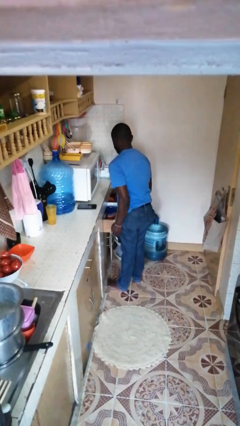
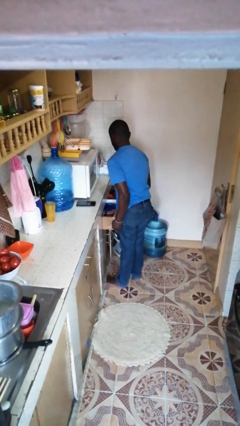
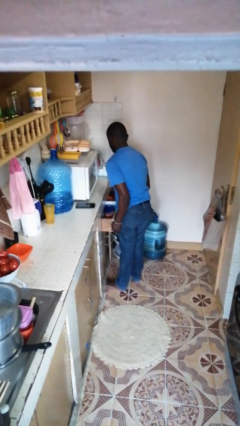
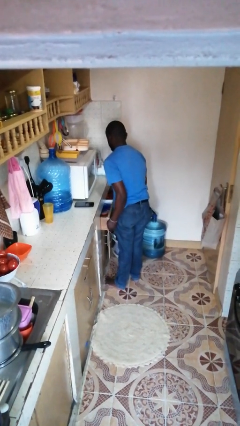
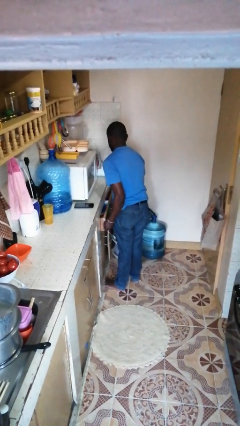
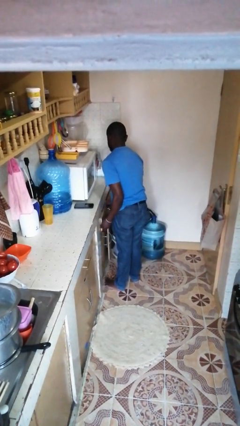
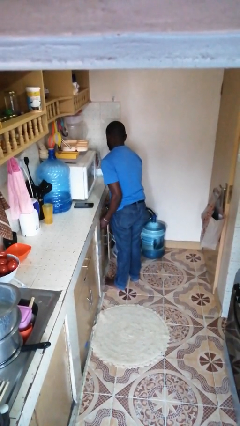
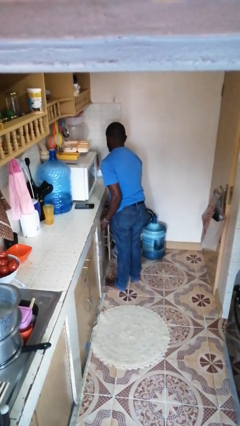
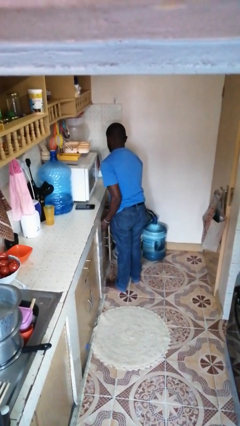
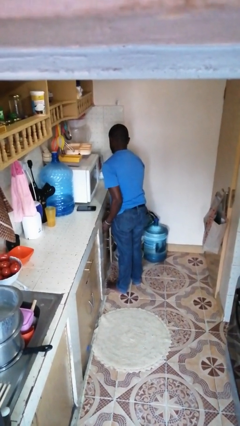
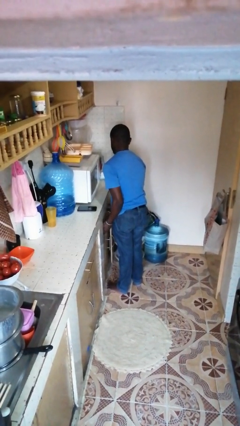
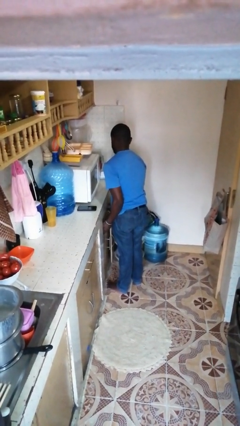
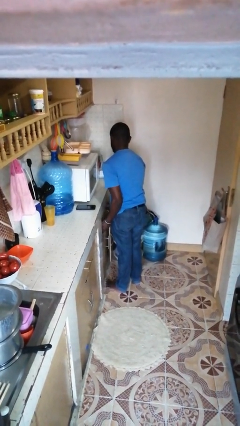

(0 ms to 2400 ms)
person closes kitchen drawer

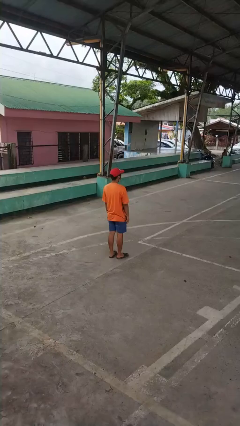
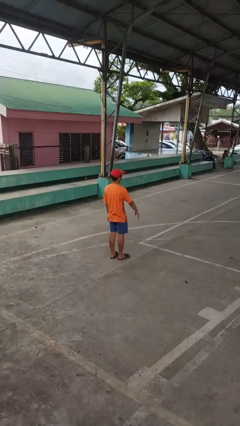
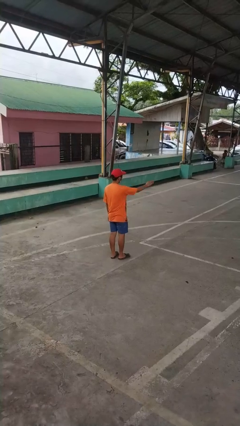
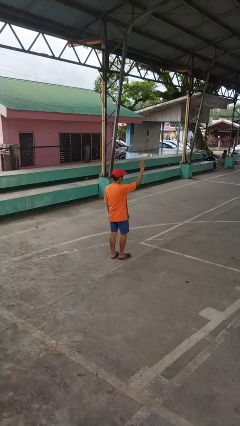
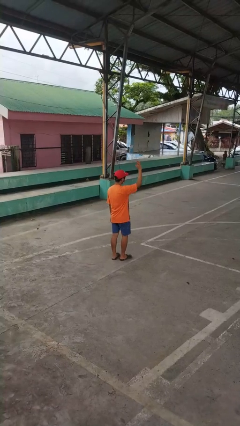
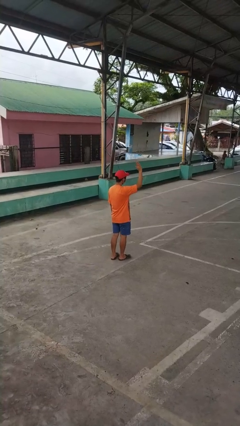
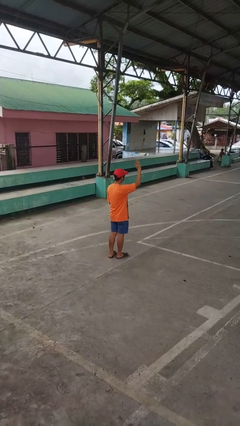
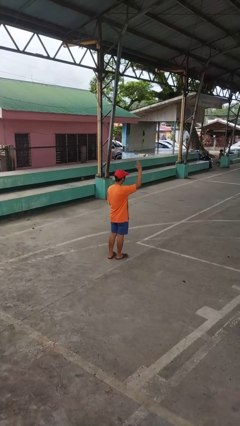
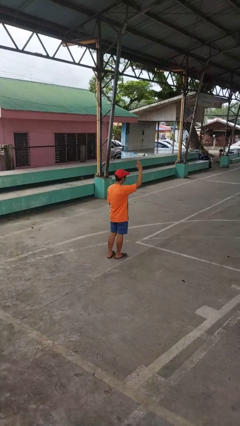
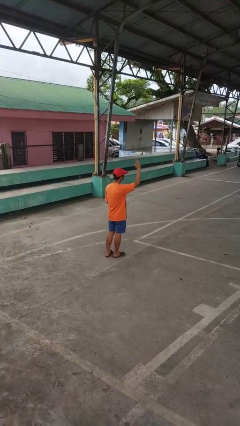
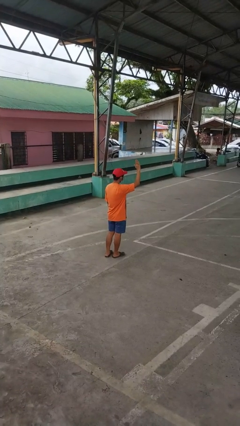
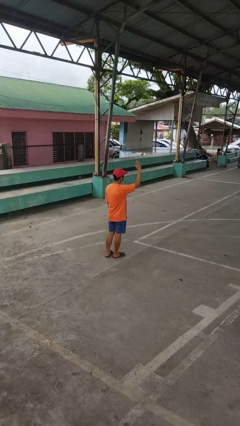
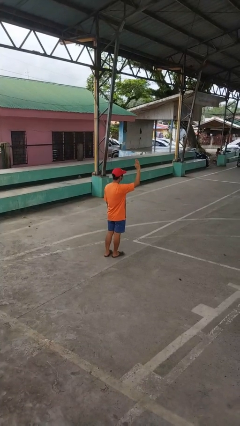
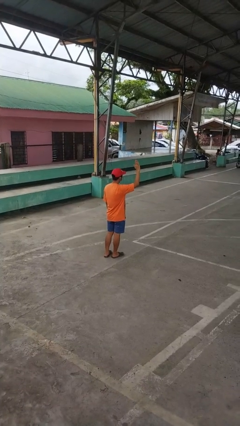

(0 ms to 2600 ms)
person gestures raise hand

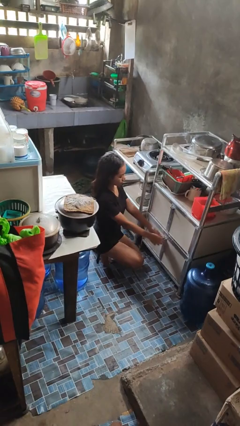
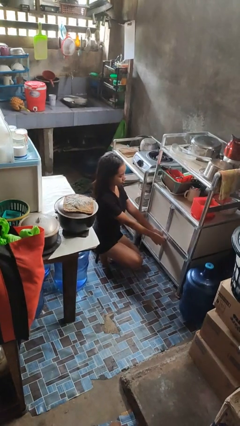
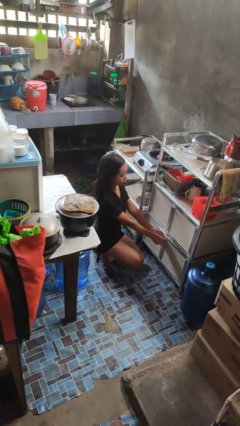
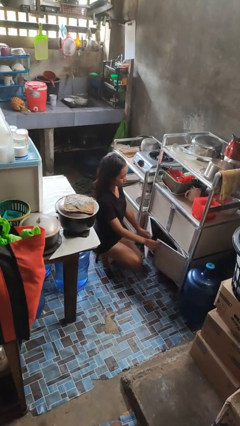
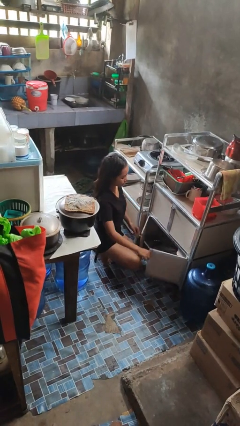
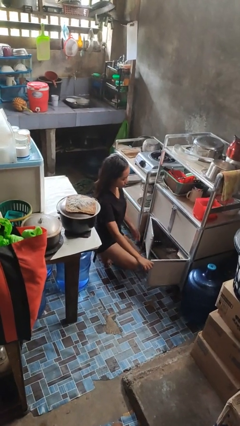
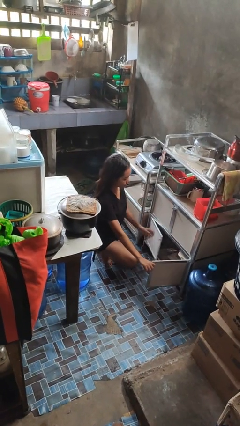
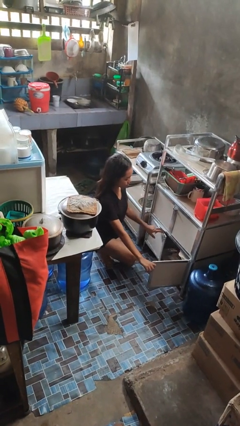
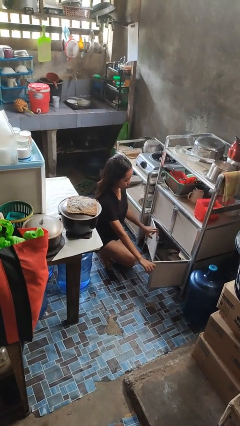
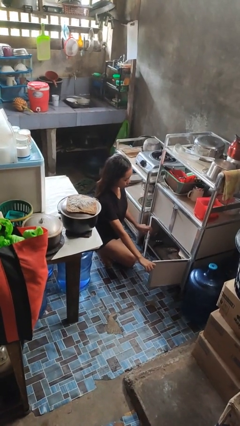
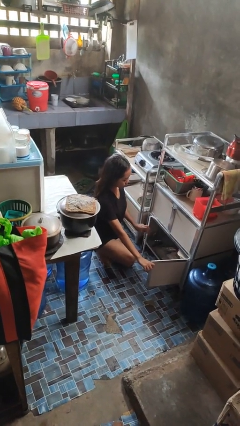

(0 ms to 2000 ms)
person opens cabinet

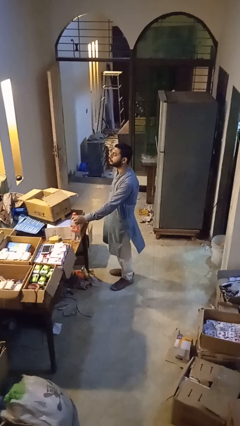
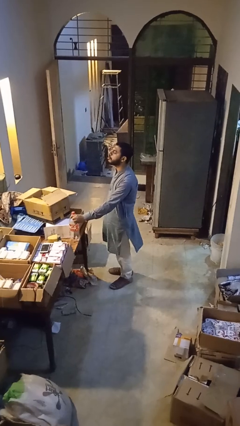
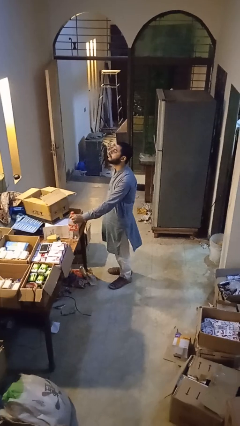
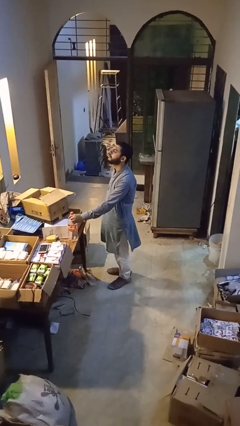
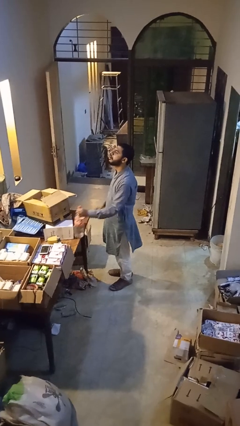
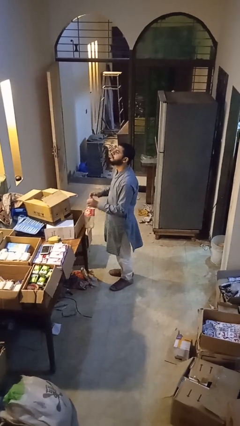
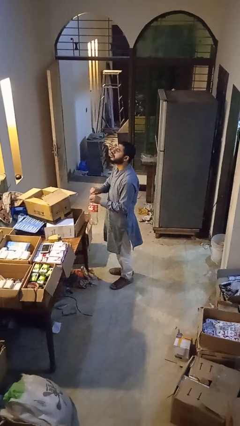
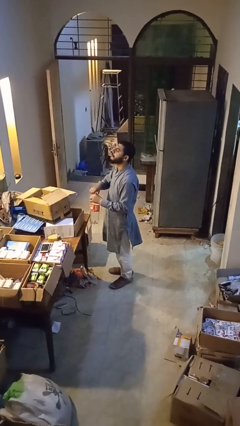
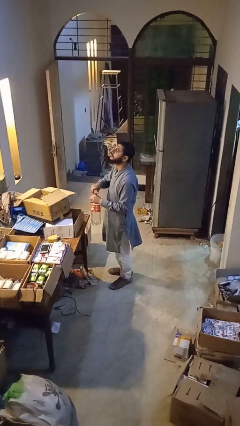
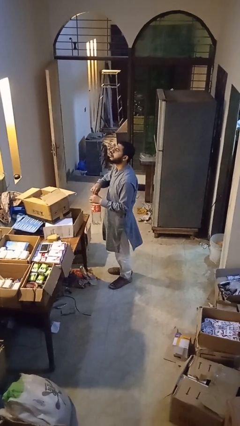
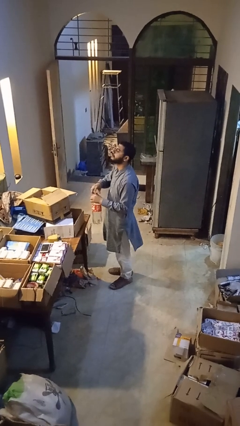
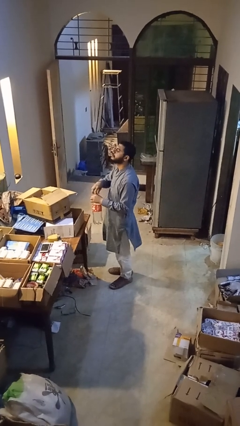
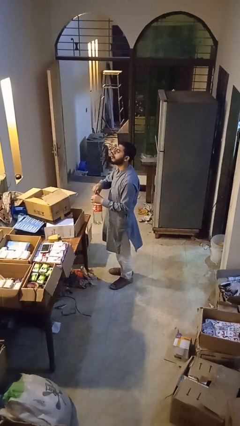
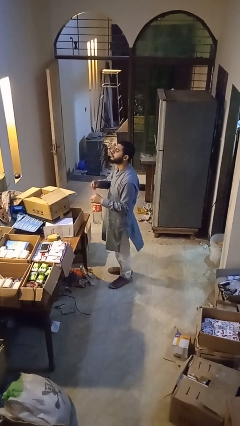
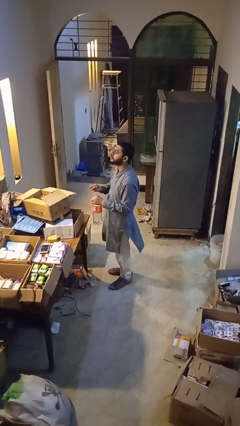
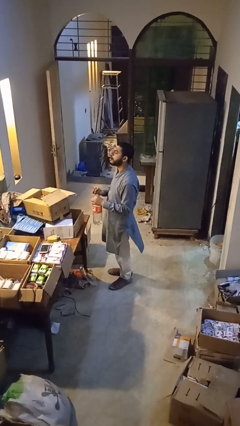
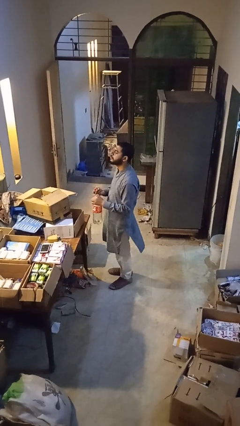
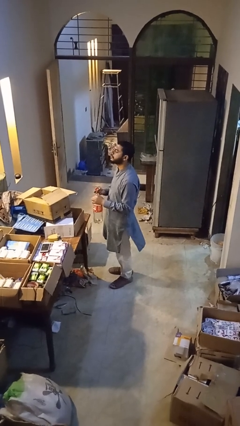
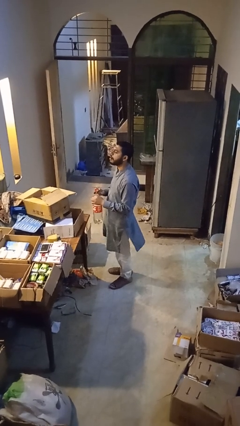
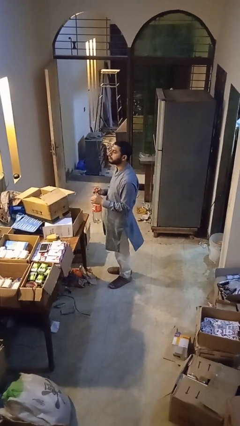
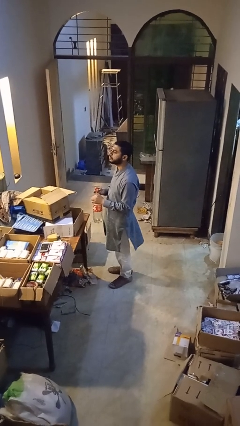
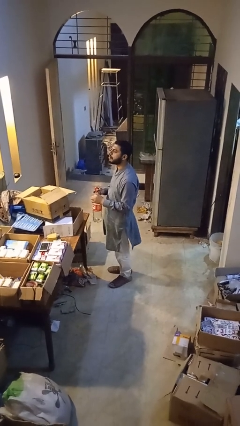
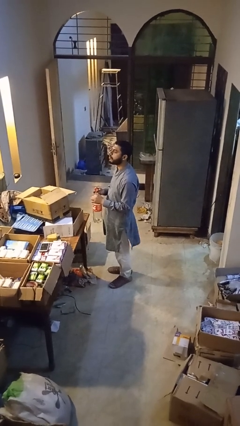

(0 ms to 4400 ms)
person unscrews lid from bottle

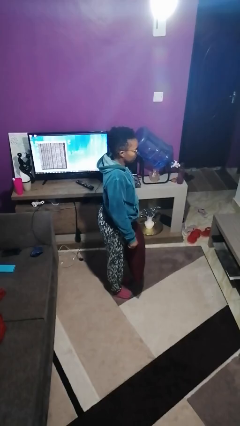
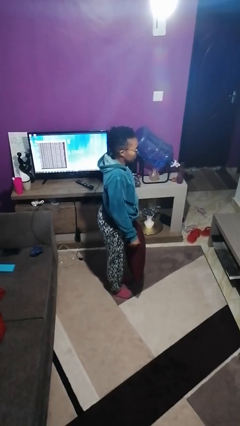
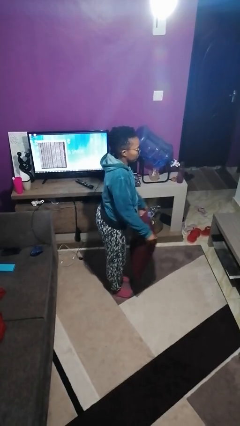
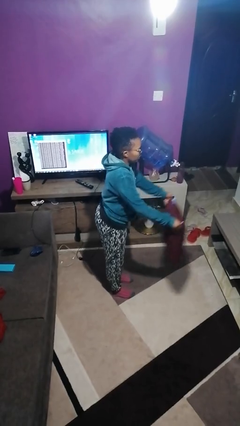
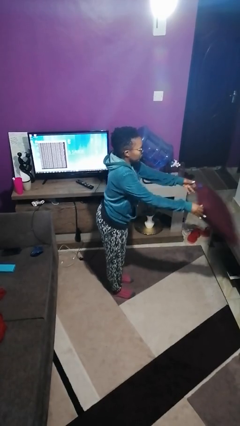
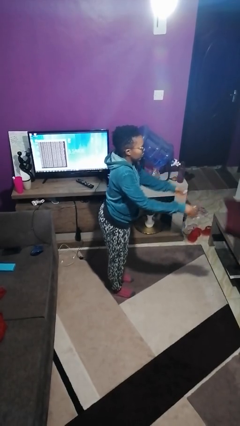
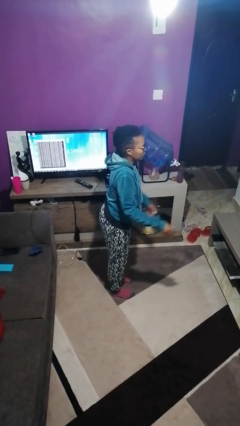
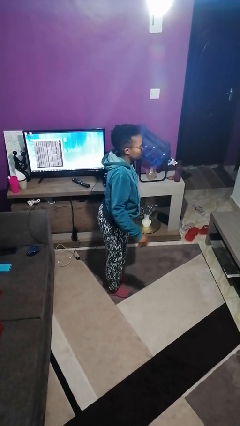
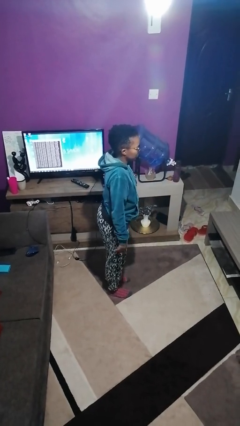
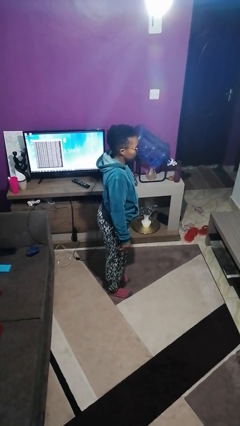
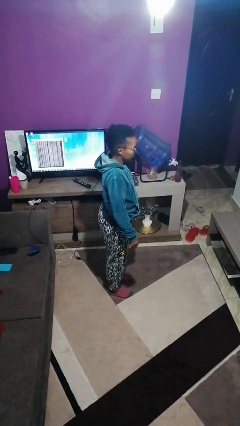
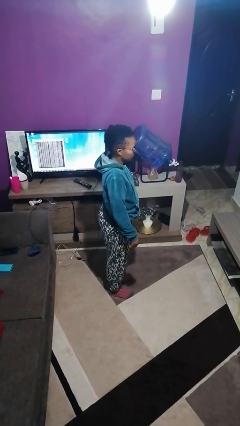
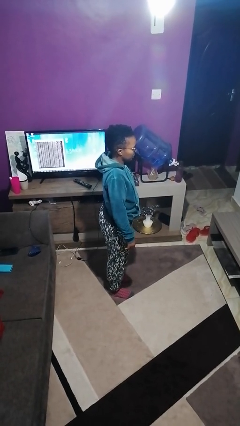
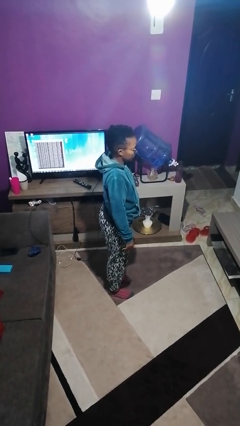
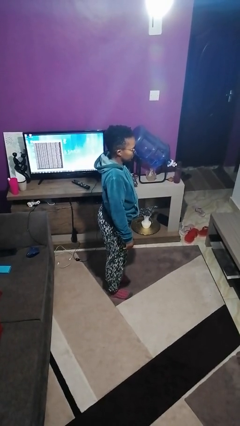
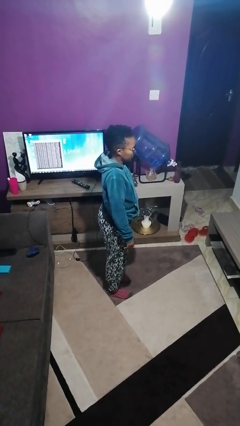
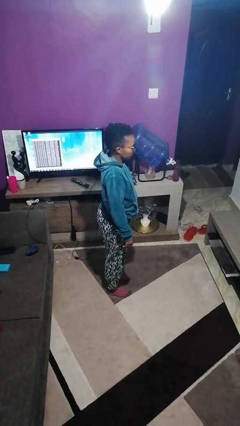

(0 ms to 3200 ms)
person throws object on table

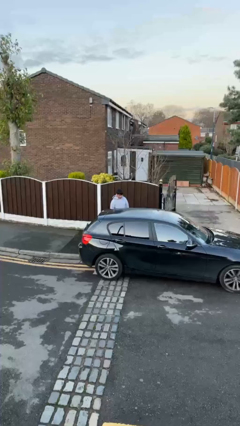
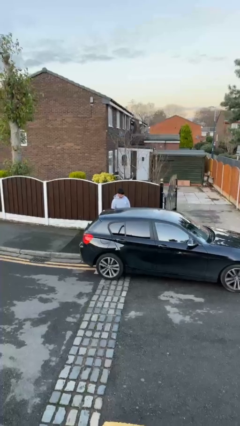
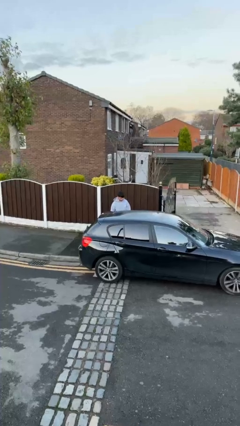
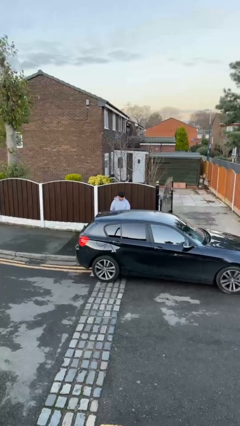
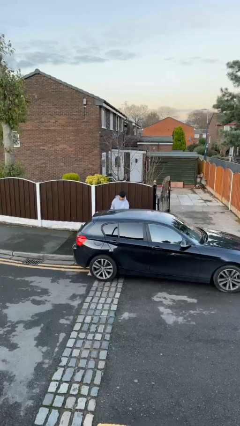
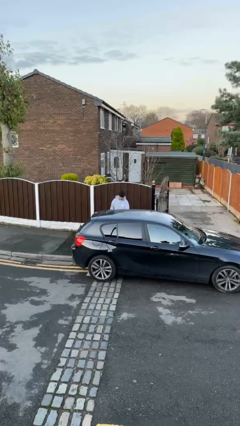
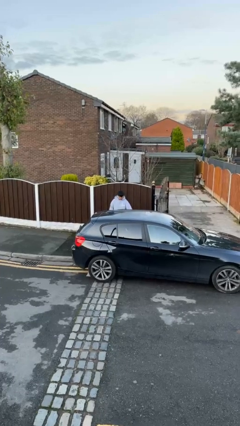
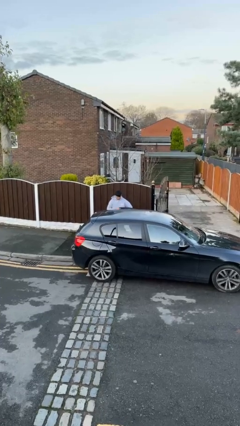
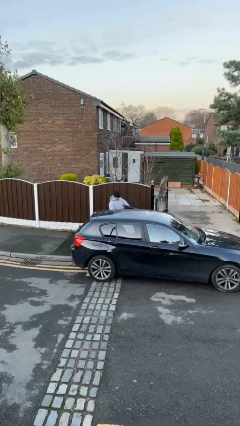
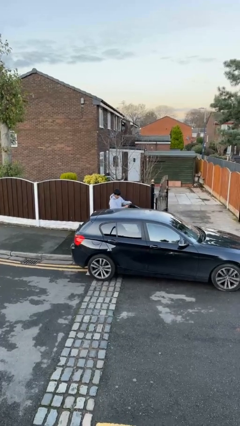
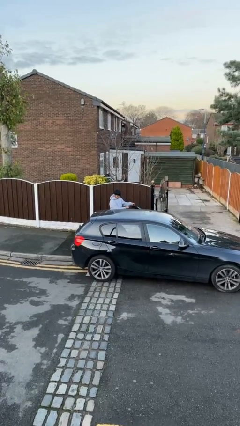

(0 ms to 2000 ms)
person opens car door

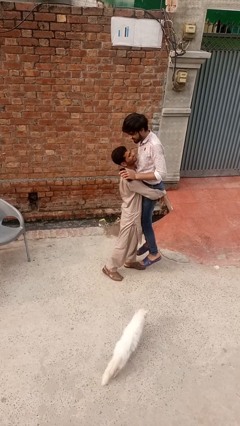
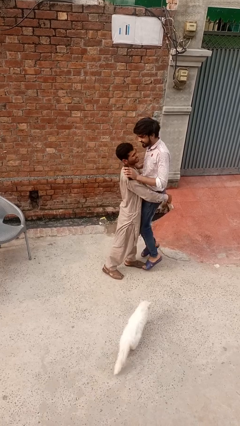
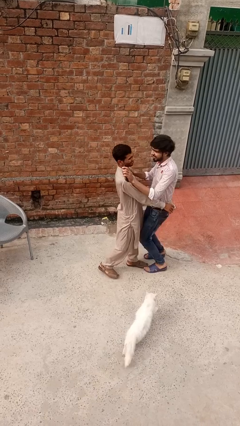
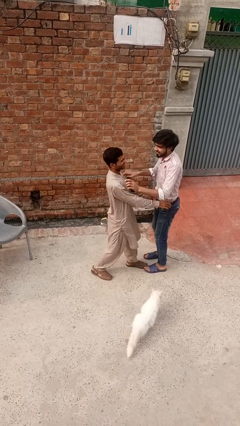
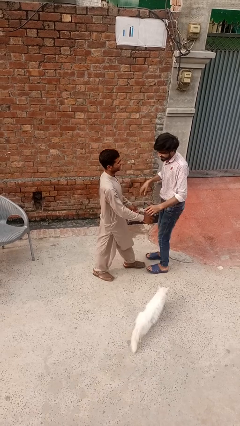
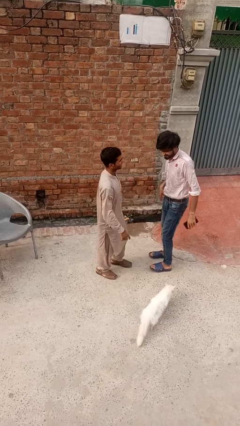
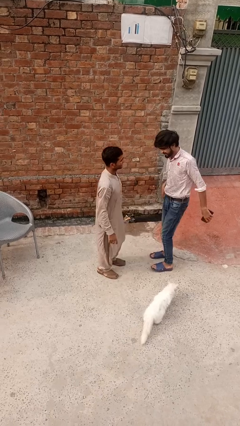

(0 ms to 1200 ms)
person puts down person
